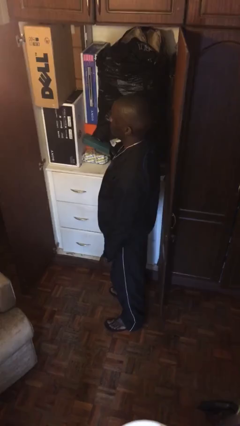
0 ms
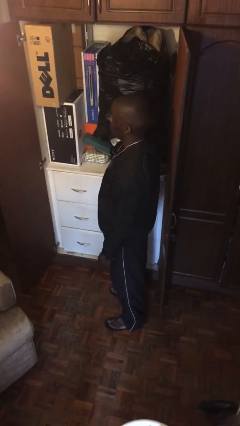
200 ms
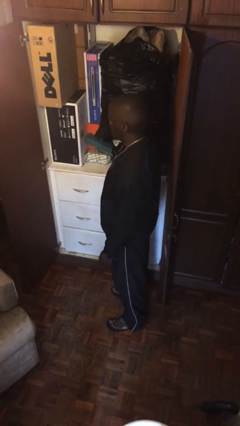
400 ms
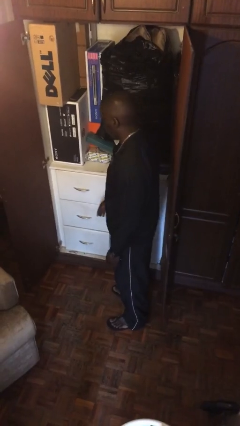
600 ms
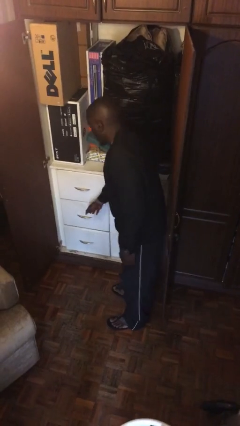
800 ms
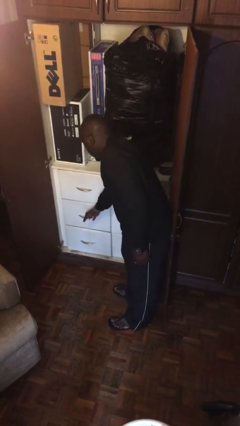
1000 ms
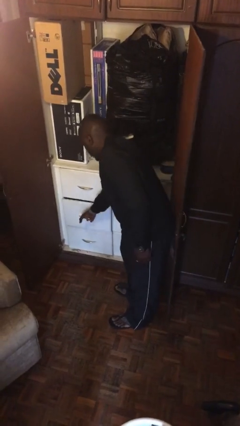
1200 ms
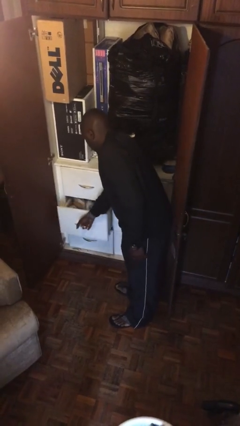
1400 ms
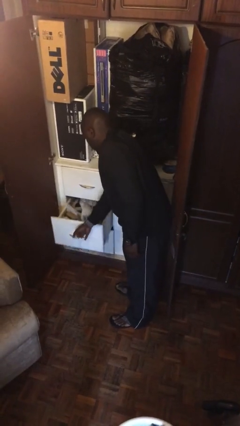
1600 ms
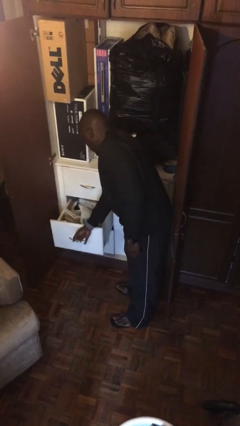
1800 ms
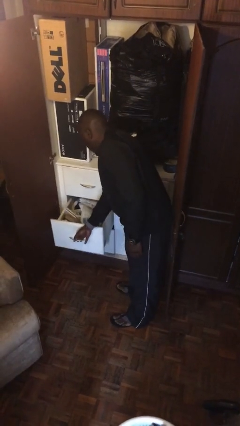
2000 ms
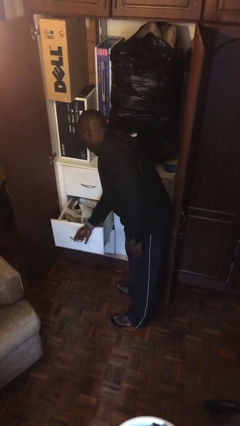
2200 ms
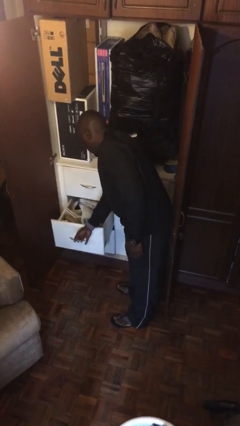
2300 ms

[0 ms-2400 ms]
person opens dresser drawer

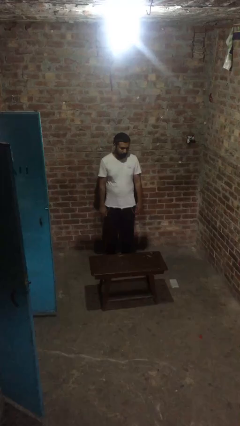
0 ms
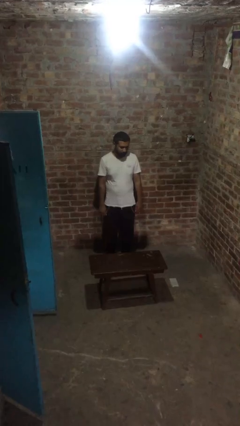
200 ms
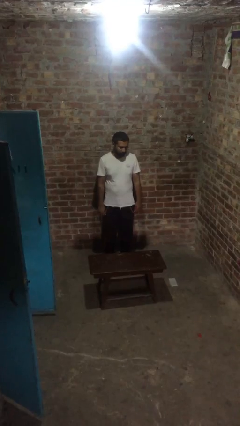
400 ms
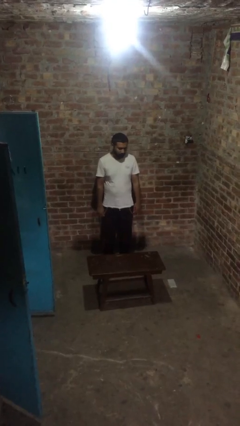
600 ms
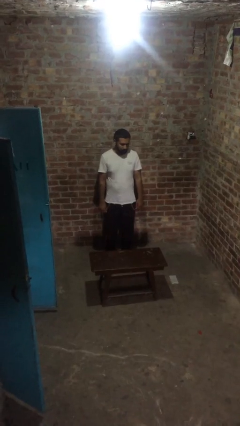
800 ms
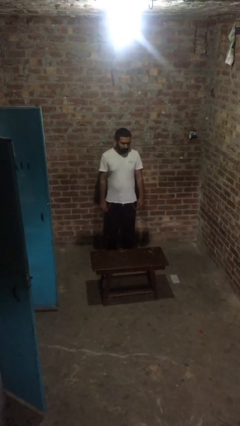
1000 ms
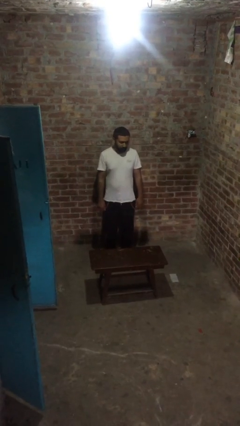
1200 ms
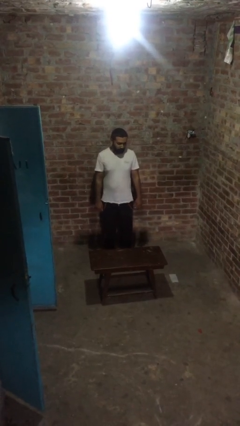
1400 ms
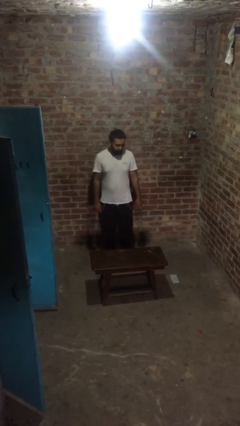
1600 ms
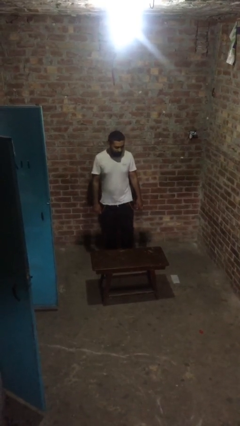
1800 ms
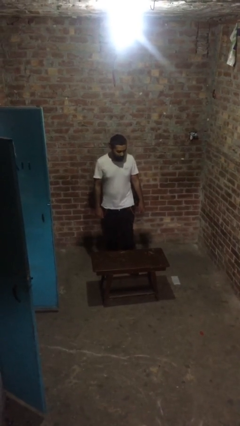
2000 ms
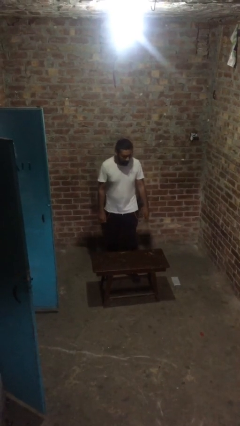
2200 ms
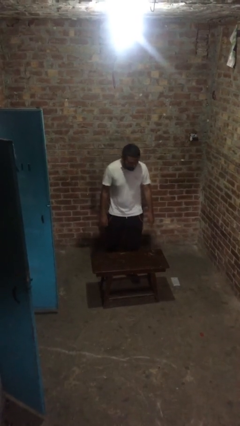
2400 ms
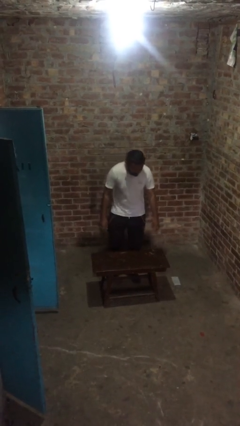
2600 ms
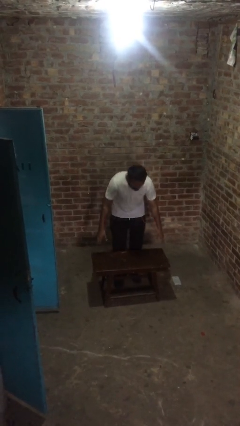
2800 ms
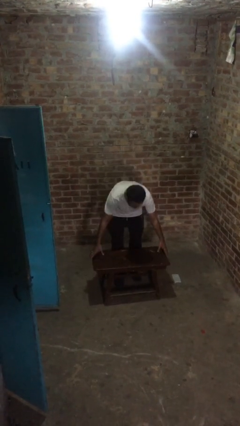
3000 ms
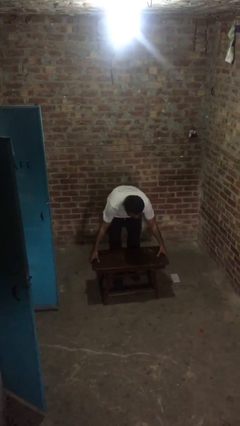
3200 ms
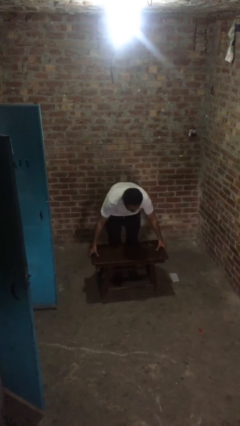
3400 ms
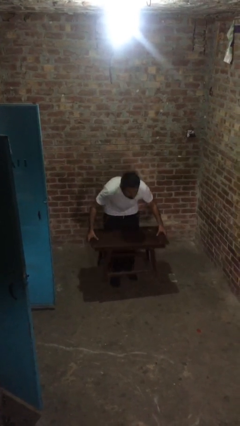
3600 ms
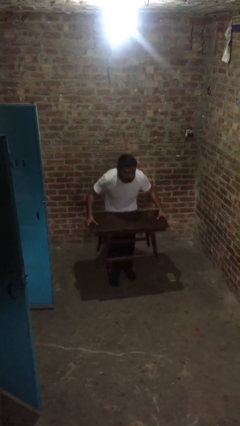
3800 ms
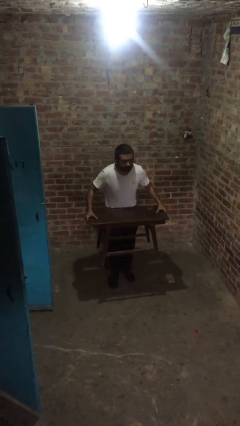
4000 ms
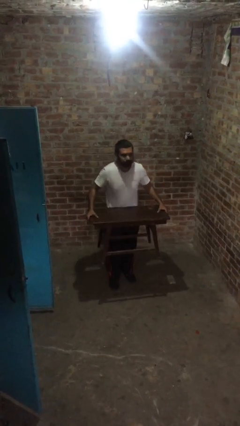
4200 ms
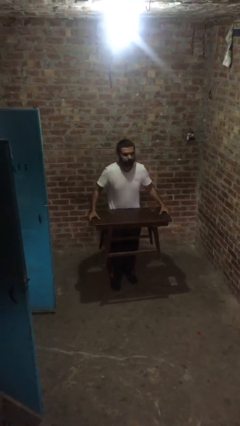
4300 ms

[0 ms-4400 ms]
person picks up object from floor

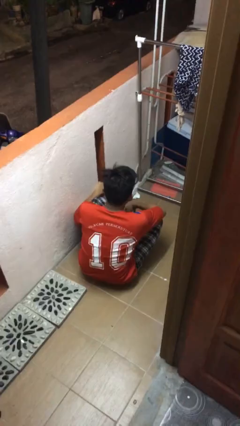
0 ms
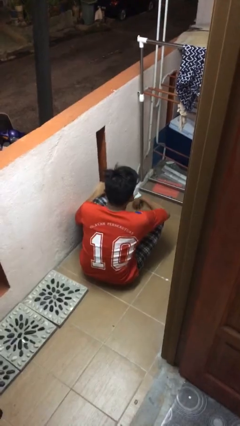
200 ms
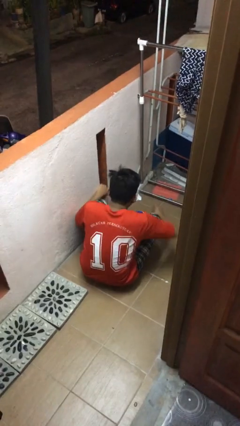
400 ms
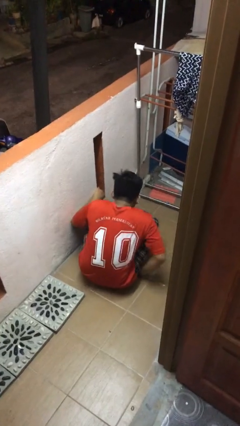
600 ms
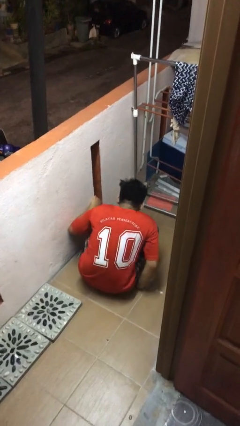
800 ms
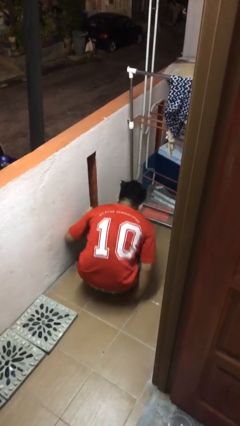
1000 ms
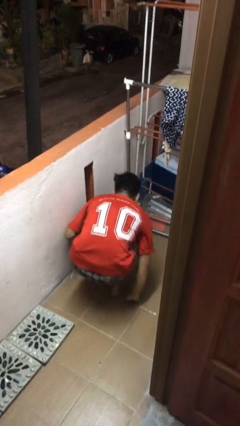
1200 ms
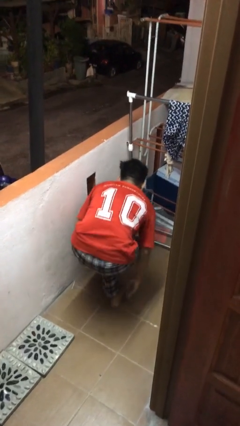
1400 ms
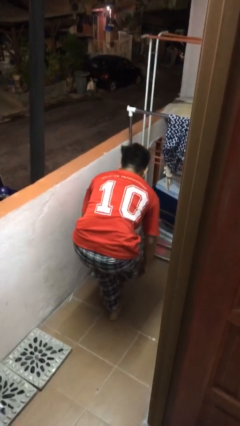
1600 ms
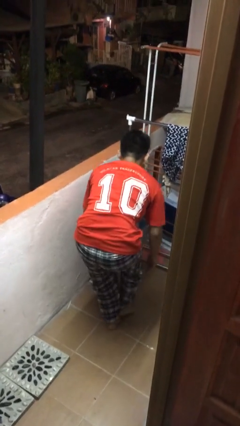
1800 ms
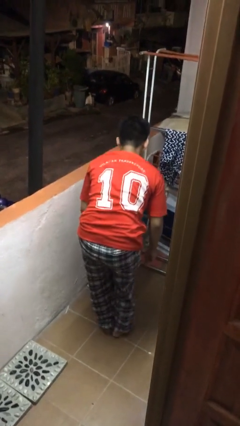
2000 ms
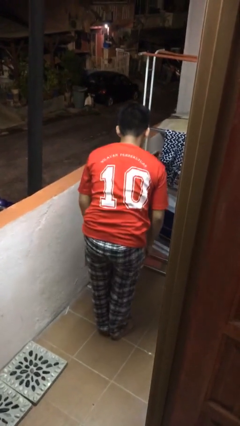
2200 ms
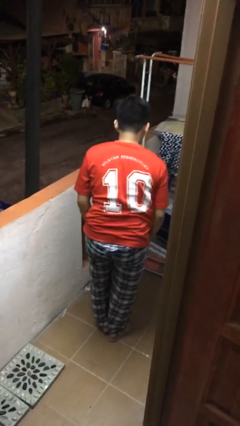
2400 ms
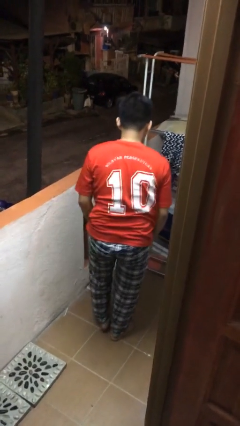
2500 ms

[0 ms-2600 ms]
person stands up from floor

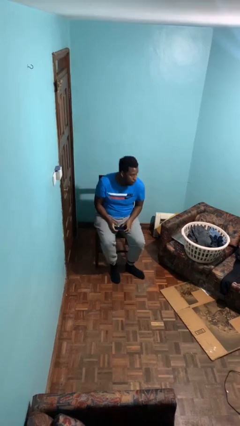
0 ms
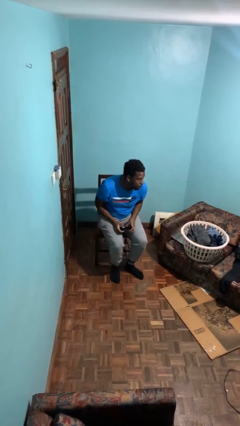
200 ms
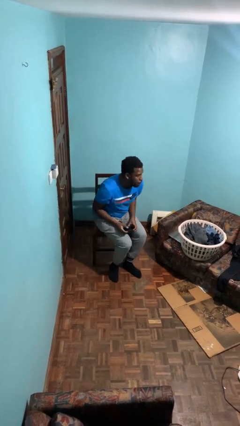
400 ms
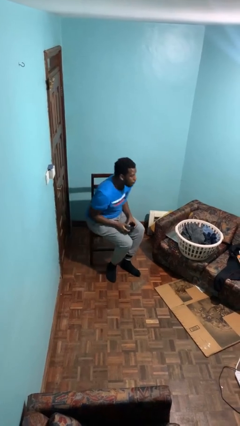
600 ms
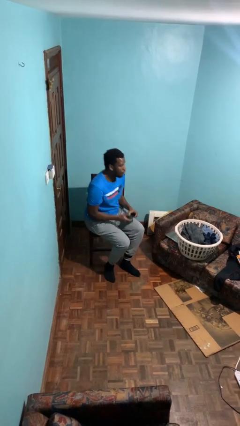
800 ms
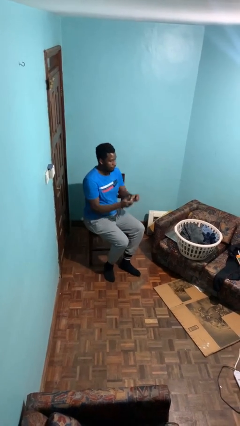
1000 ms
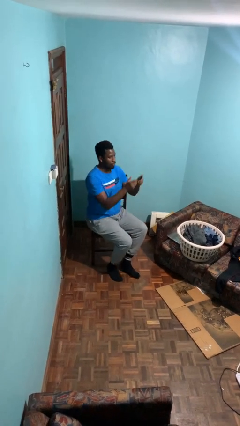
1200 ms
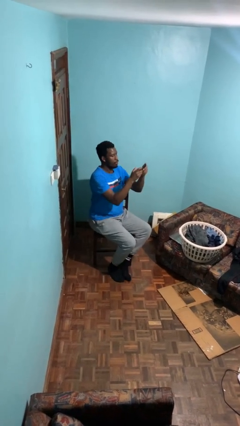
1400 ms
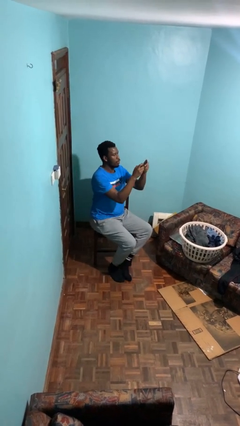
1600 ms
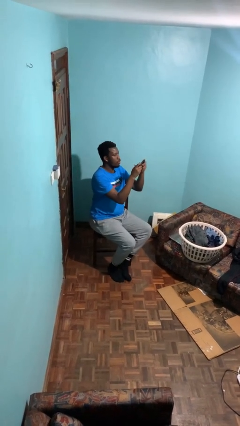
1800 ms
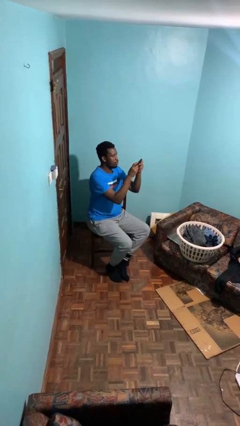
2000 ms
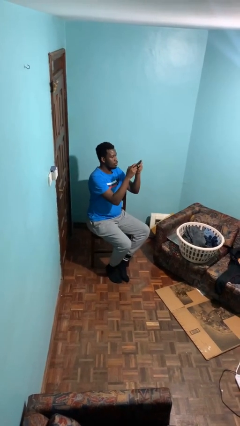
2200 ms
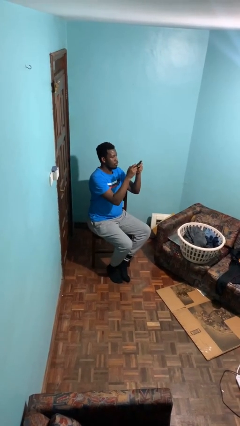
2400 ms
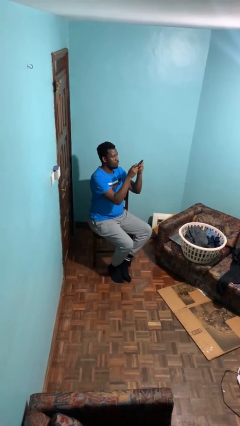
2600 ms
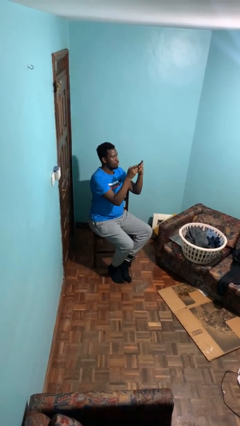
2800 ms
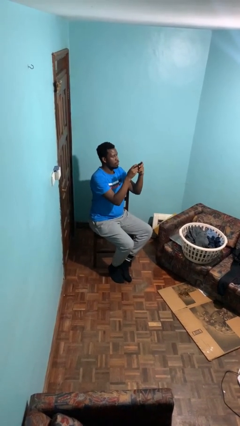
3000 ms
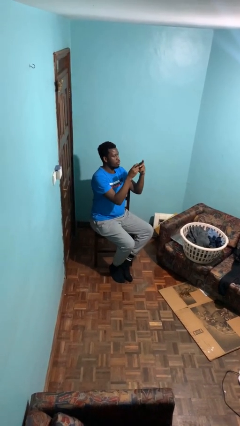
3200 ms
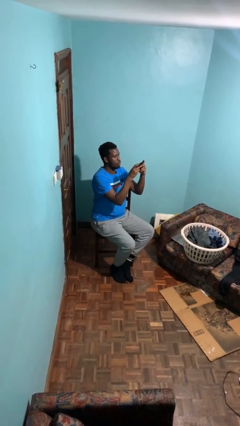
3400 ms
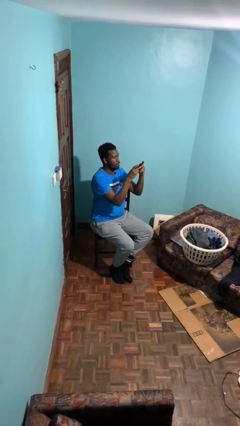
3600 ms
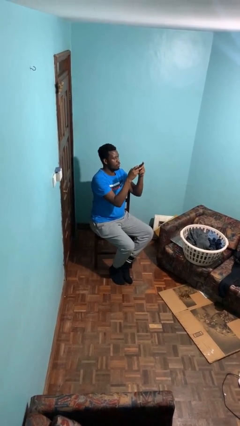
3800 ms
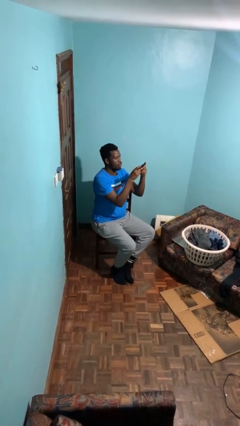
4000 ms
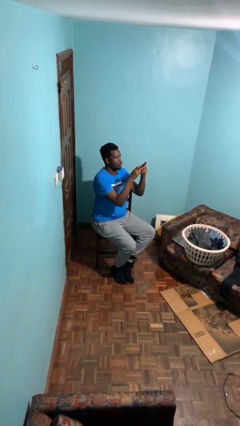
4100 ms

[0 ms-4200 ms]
person interacts with handheld game

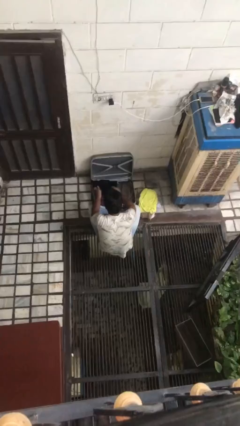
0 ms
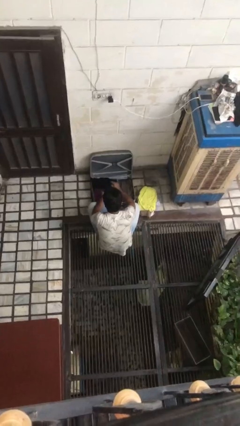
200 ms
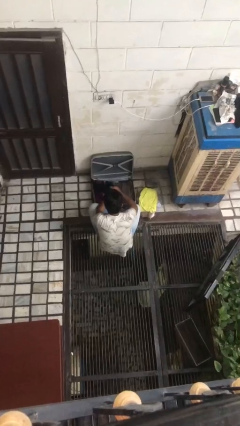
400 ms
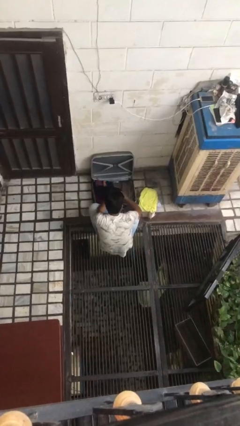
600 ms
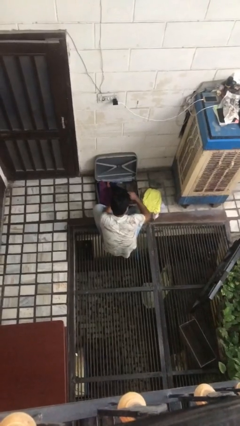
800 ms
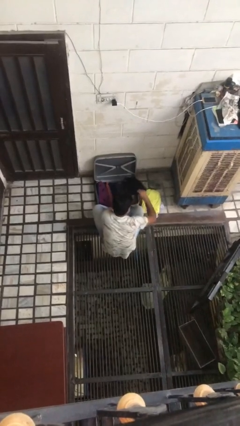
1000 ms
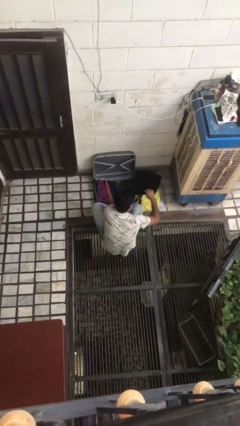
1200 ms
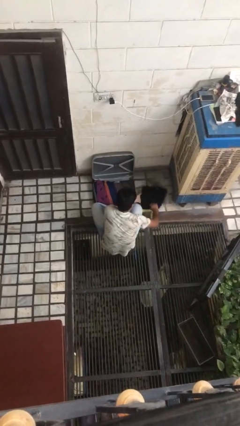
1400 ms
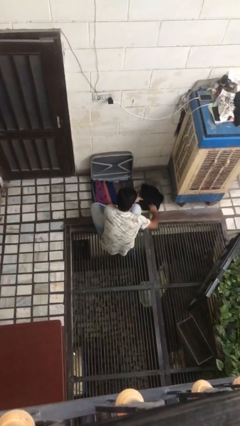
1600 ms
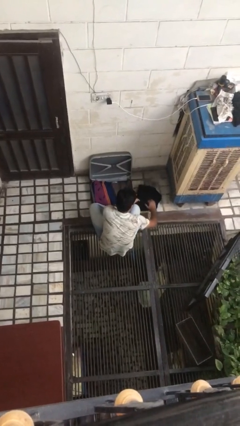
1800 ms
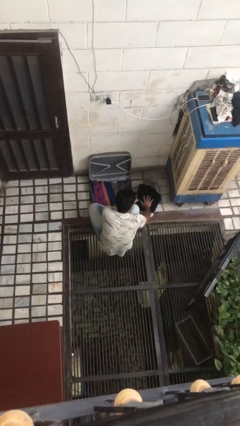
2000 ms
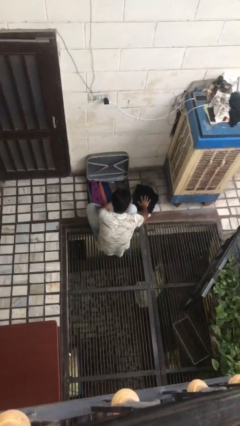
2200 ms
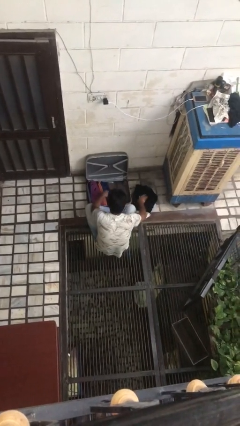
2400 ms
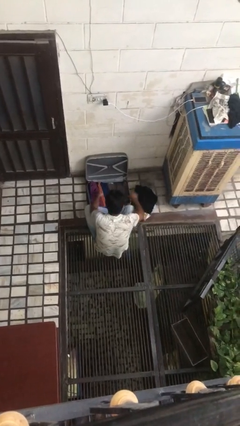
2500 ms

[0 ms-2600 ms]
person unloads clothes from suitcase

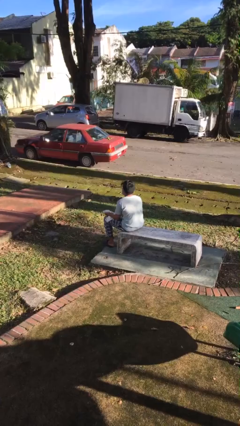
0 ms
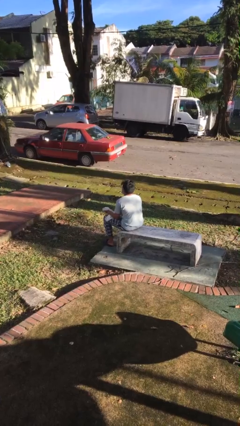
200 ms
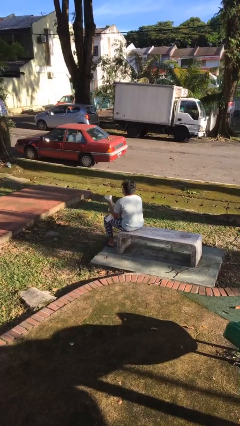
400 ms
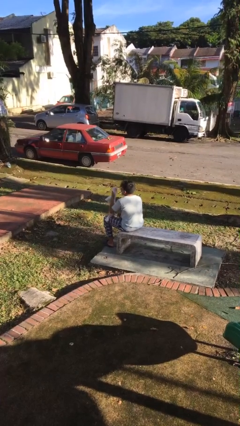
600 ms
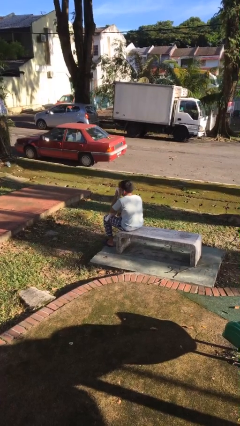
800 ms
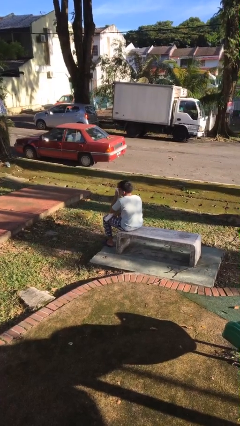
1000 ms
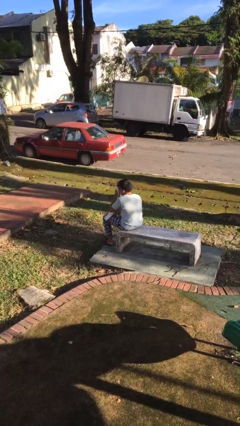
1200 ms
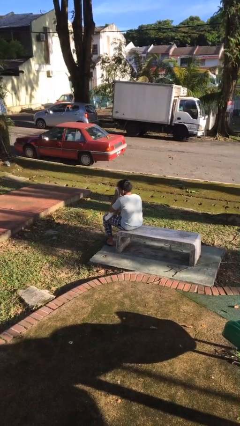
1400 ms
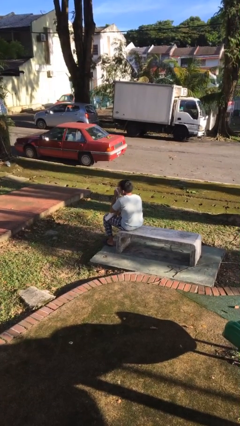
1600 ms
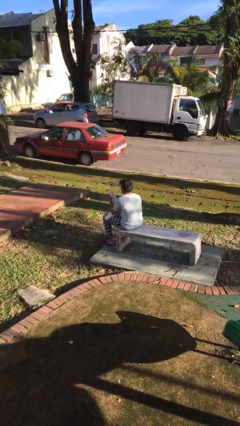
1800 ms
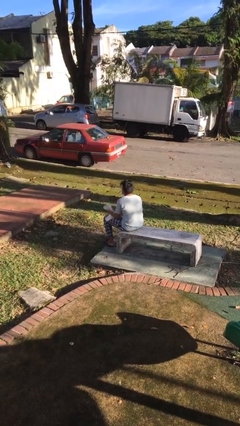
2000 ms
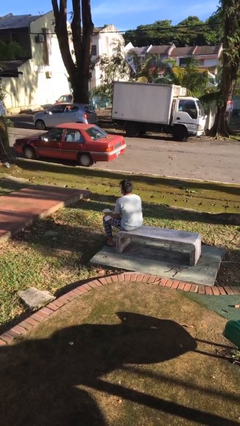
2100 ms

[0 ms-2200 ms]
person blows nose
